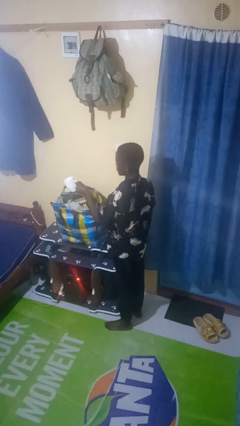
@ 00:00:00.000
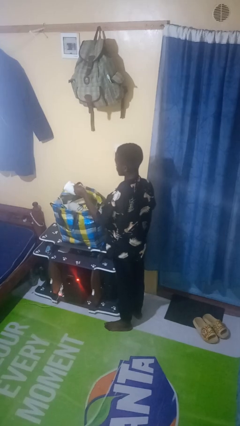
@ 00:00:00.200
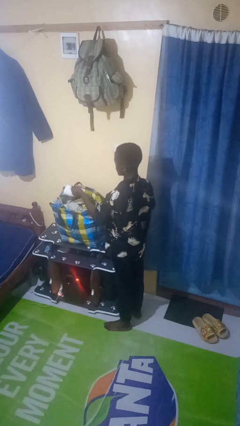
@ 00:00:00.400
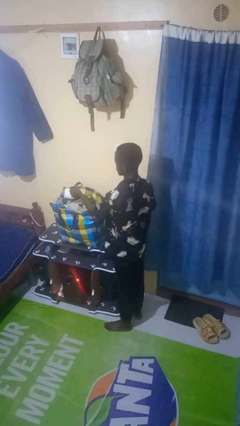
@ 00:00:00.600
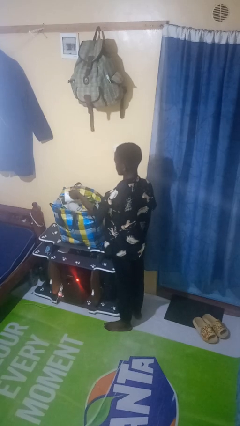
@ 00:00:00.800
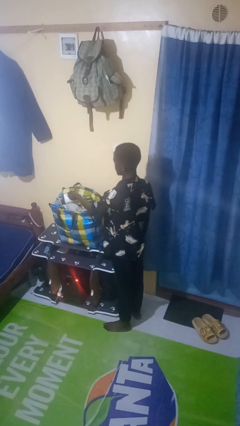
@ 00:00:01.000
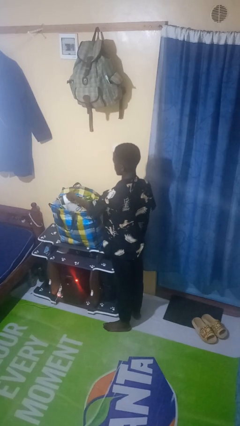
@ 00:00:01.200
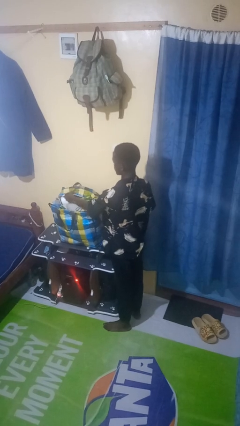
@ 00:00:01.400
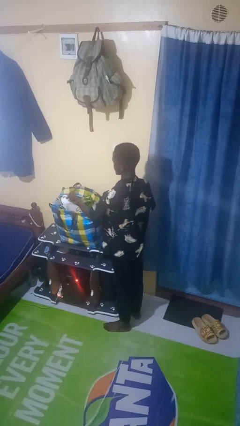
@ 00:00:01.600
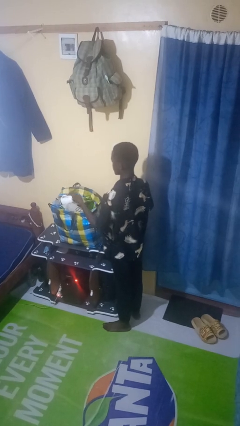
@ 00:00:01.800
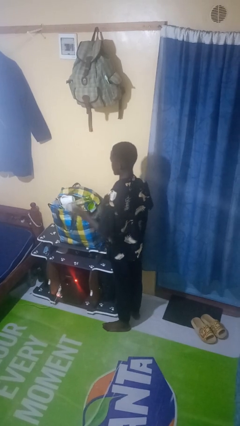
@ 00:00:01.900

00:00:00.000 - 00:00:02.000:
person puts object into bag

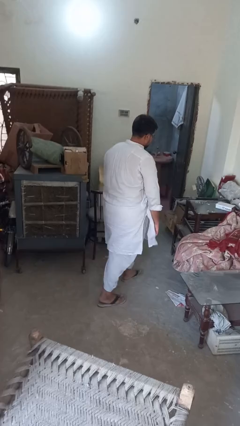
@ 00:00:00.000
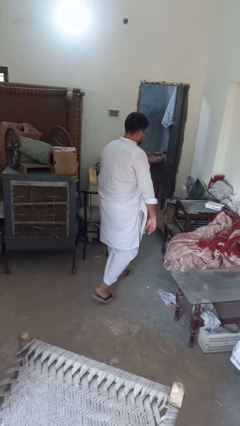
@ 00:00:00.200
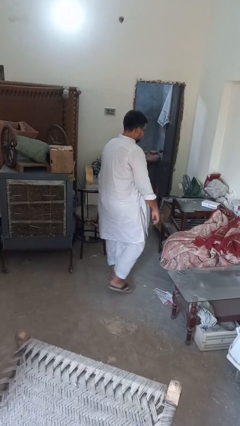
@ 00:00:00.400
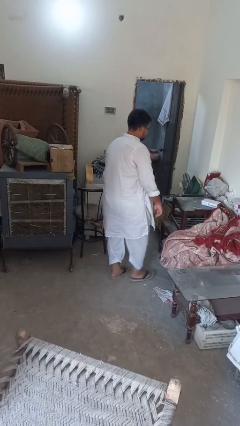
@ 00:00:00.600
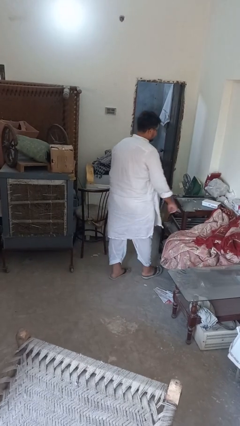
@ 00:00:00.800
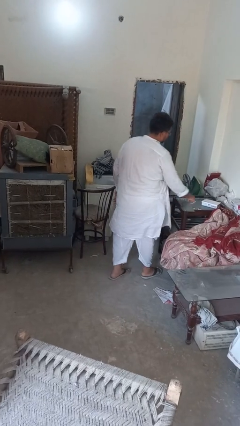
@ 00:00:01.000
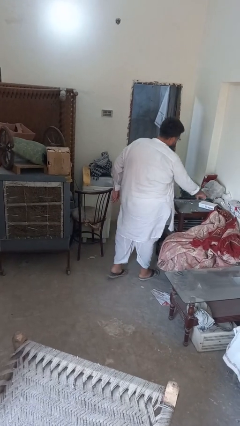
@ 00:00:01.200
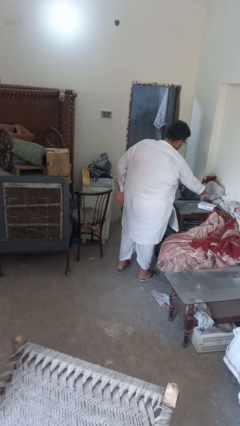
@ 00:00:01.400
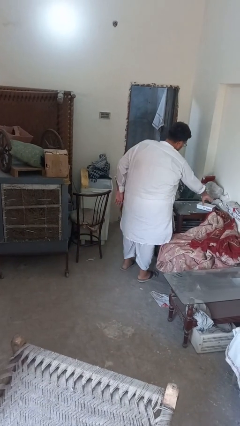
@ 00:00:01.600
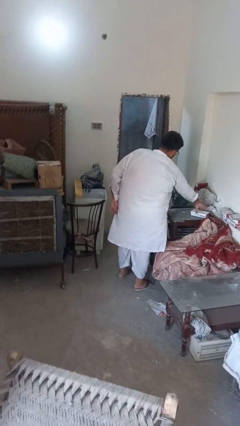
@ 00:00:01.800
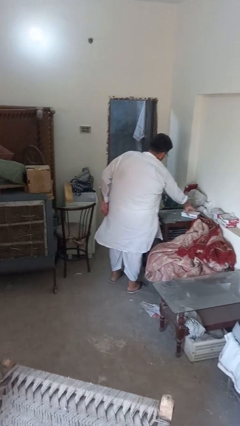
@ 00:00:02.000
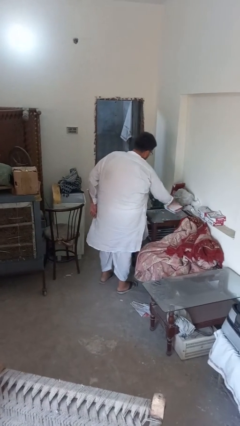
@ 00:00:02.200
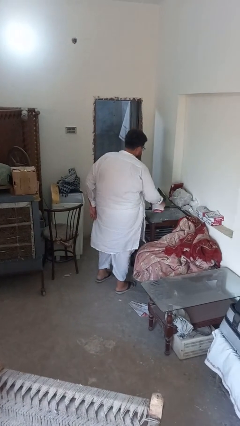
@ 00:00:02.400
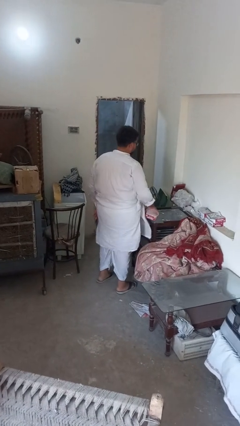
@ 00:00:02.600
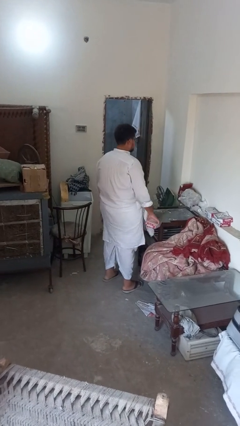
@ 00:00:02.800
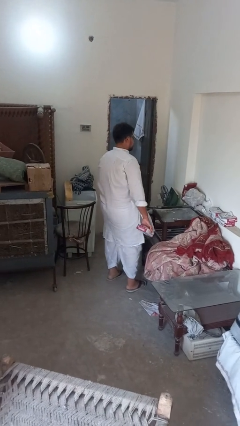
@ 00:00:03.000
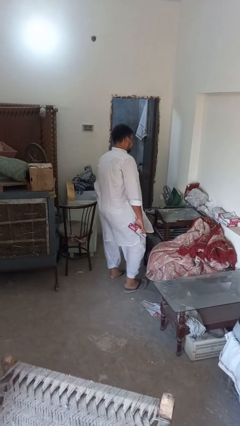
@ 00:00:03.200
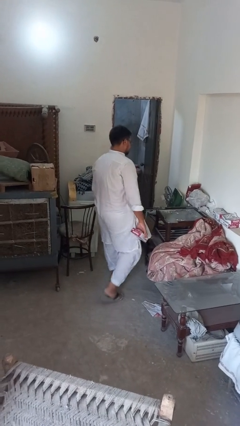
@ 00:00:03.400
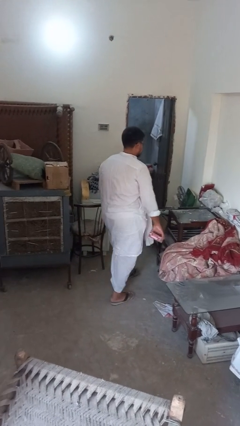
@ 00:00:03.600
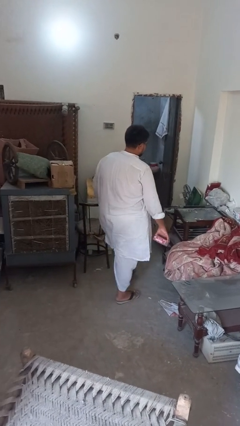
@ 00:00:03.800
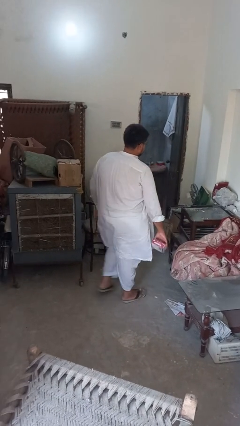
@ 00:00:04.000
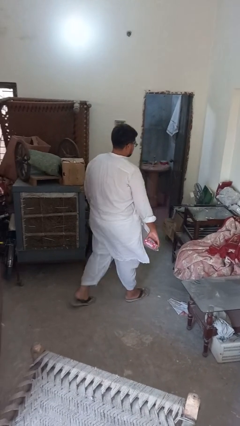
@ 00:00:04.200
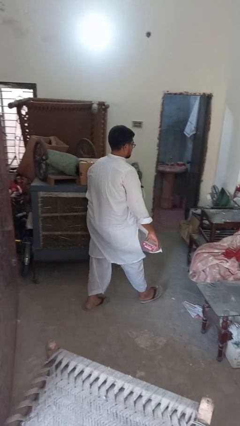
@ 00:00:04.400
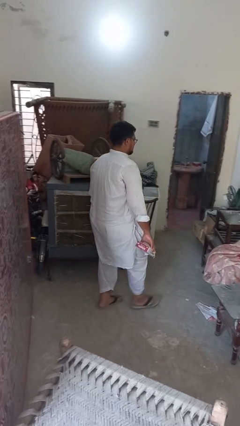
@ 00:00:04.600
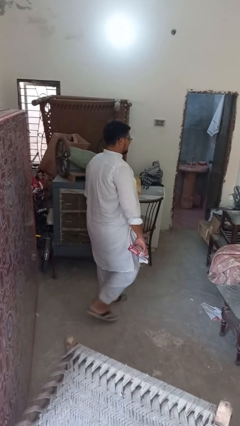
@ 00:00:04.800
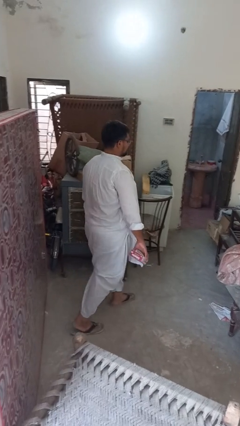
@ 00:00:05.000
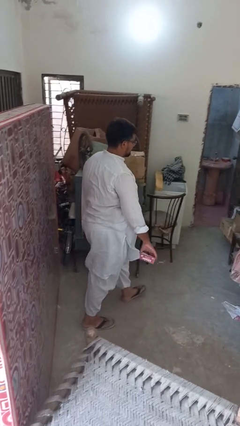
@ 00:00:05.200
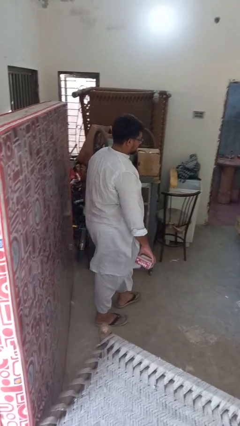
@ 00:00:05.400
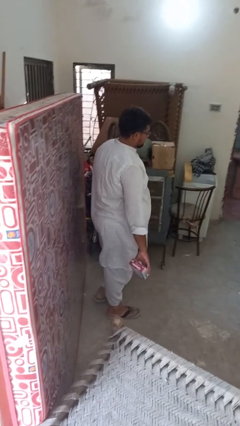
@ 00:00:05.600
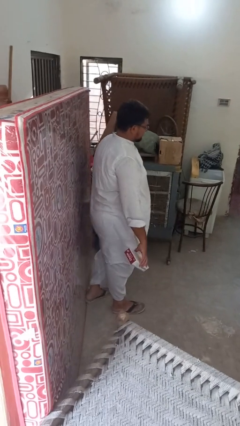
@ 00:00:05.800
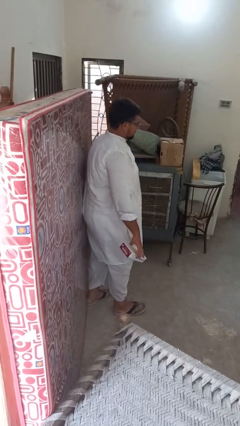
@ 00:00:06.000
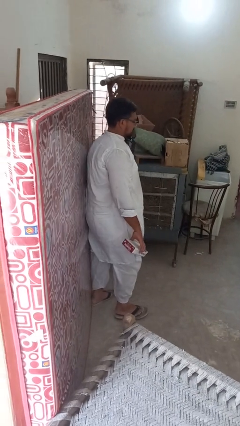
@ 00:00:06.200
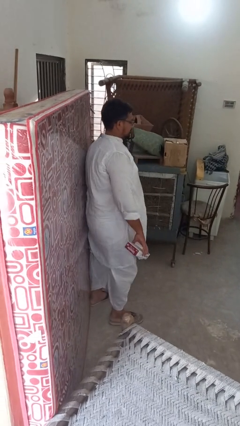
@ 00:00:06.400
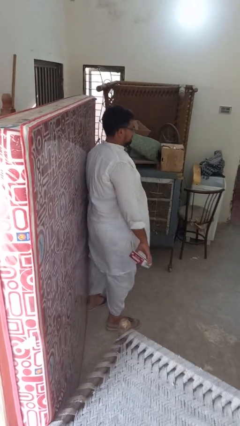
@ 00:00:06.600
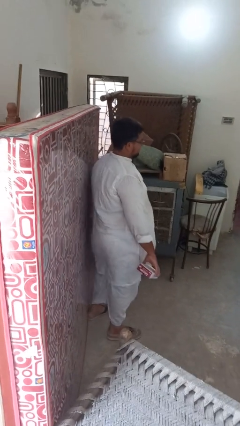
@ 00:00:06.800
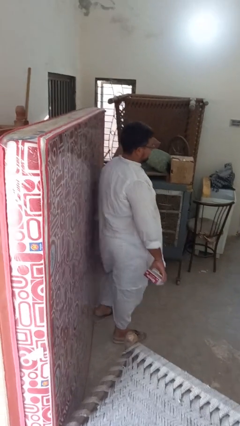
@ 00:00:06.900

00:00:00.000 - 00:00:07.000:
person picks up object from table

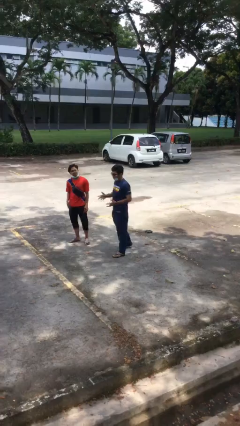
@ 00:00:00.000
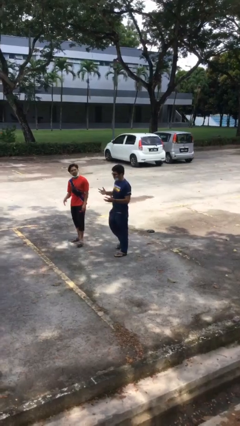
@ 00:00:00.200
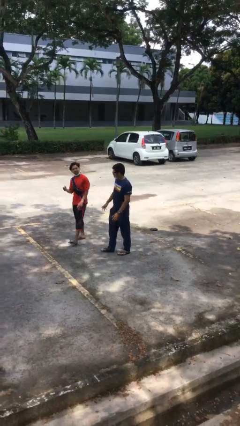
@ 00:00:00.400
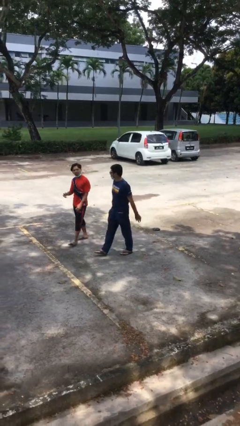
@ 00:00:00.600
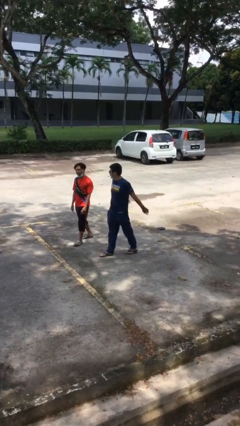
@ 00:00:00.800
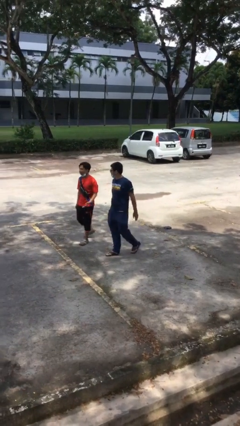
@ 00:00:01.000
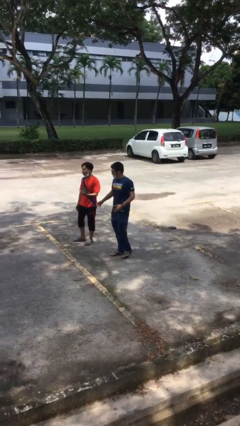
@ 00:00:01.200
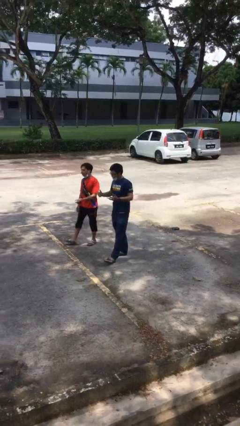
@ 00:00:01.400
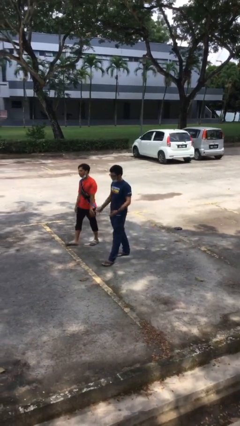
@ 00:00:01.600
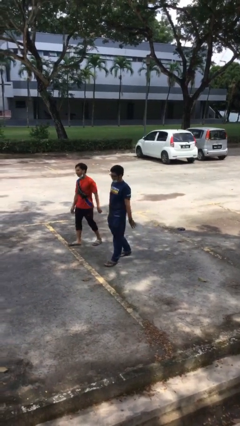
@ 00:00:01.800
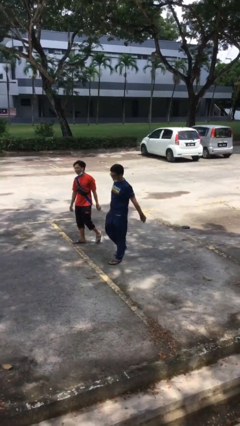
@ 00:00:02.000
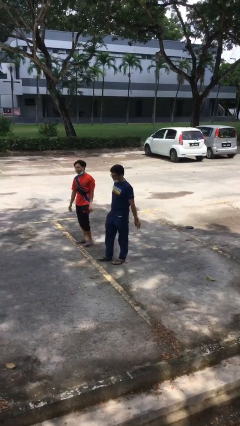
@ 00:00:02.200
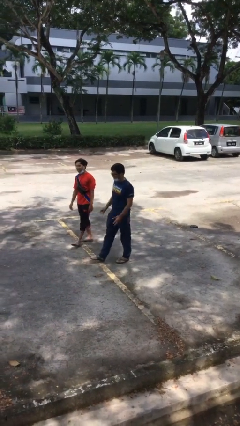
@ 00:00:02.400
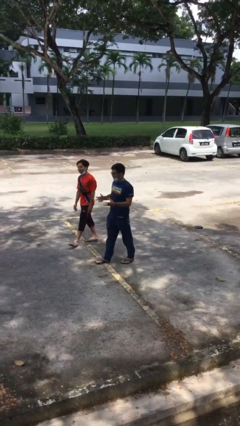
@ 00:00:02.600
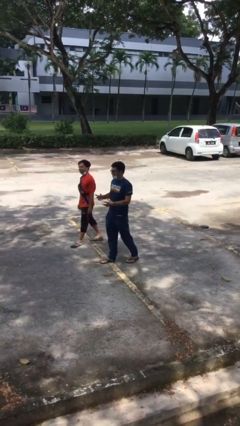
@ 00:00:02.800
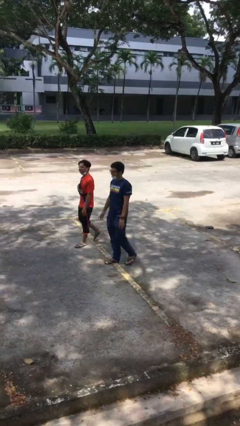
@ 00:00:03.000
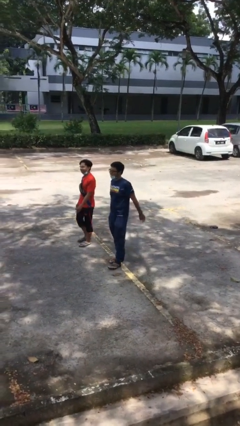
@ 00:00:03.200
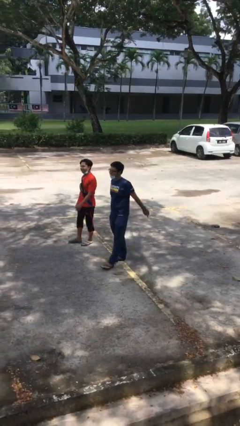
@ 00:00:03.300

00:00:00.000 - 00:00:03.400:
person talks to person

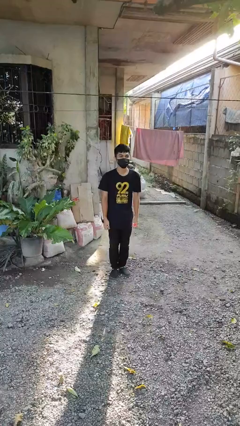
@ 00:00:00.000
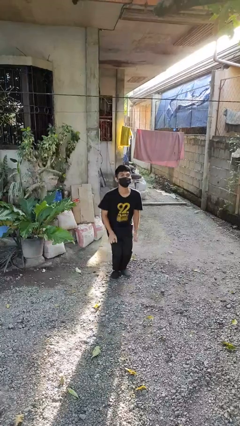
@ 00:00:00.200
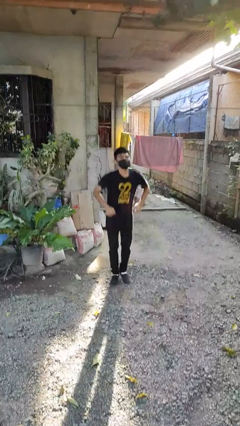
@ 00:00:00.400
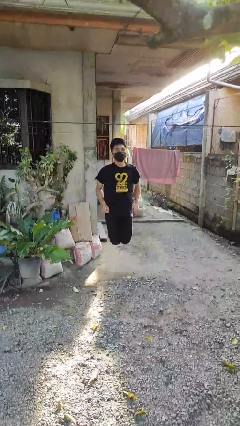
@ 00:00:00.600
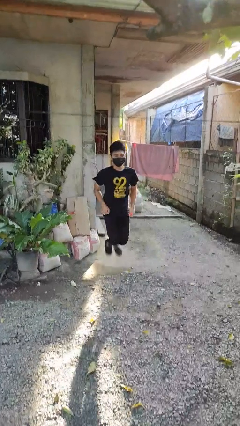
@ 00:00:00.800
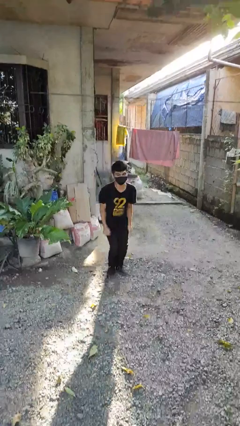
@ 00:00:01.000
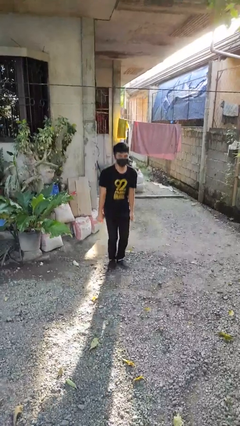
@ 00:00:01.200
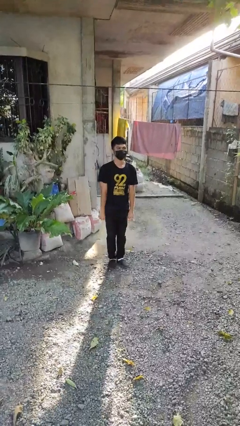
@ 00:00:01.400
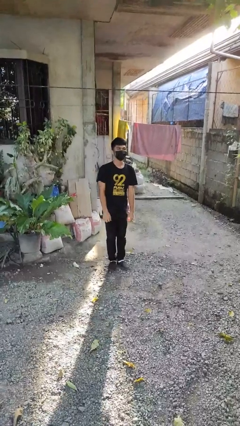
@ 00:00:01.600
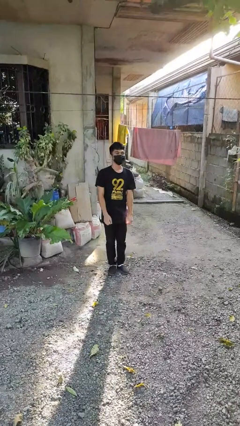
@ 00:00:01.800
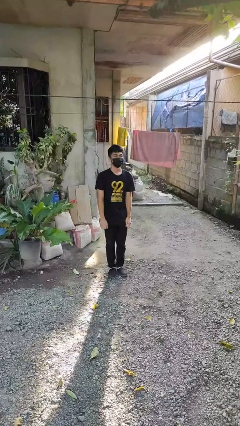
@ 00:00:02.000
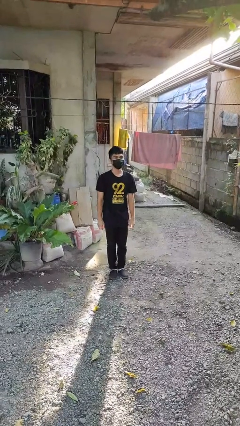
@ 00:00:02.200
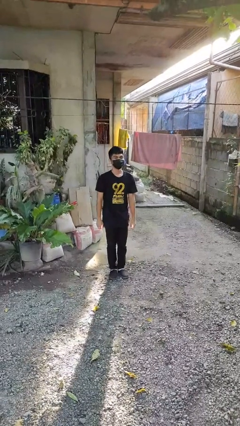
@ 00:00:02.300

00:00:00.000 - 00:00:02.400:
person jumps

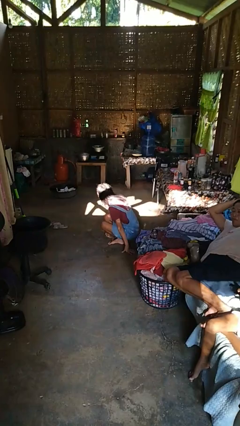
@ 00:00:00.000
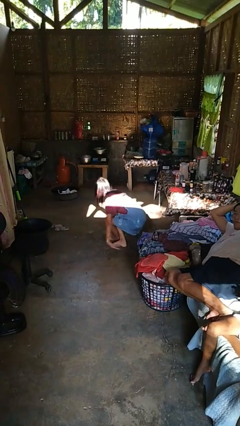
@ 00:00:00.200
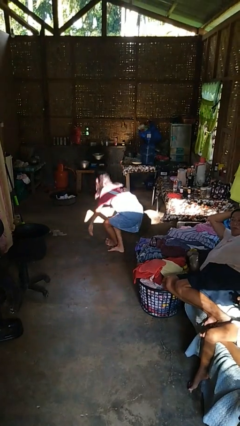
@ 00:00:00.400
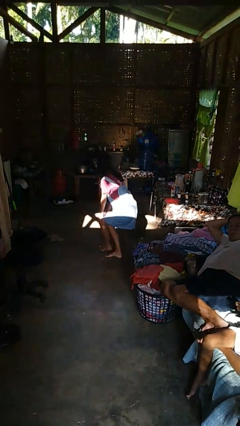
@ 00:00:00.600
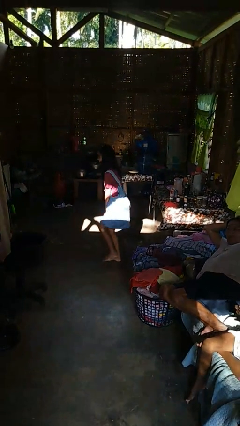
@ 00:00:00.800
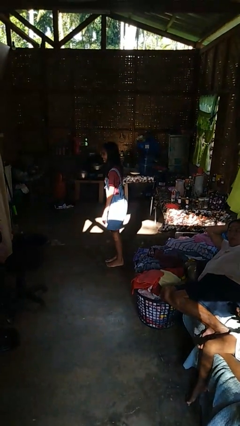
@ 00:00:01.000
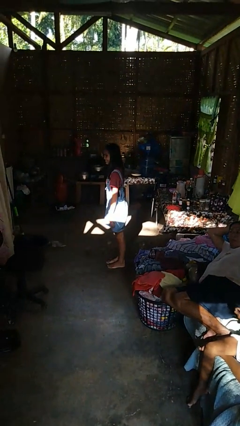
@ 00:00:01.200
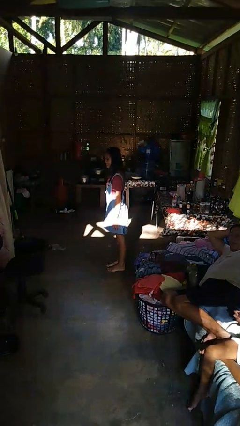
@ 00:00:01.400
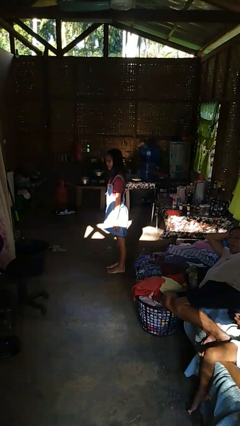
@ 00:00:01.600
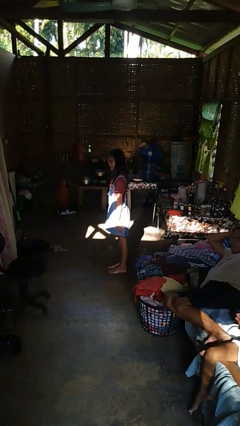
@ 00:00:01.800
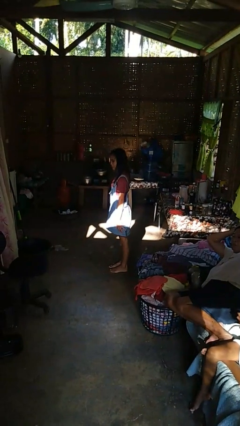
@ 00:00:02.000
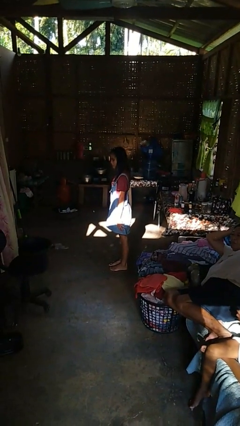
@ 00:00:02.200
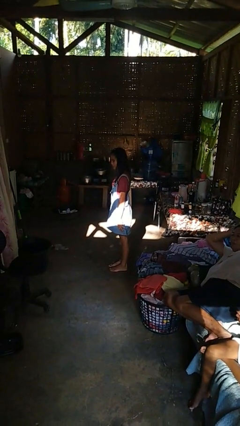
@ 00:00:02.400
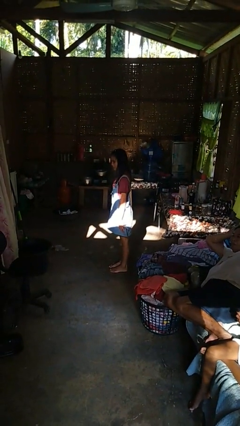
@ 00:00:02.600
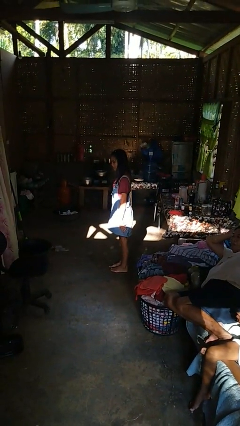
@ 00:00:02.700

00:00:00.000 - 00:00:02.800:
person stands up from floor
